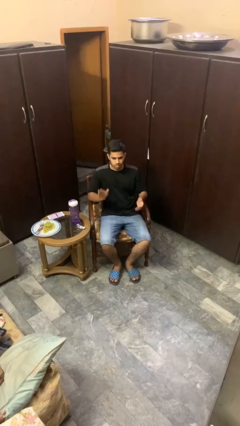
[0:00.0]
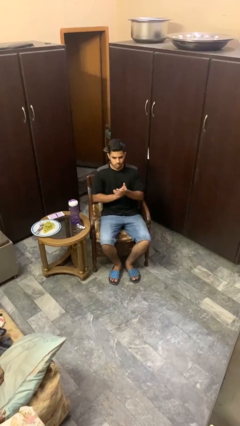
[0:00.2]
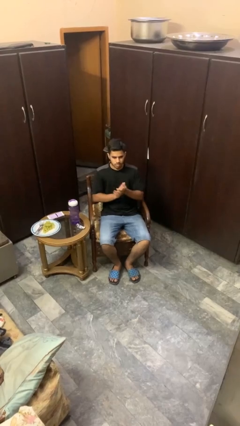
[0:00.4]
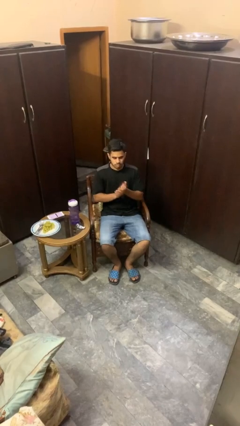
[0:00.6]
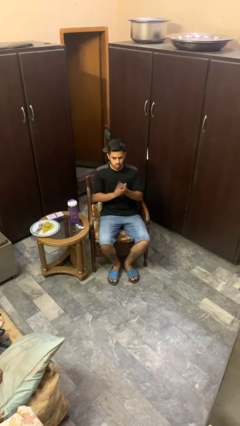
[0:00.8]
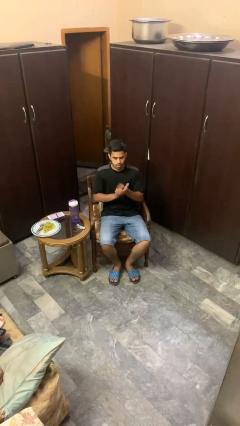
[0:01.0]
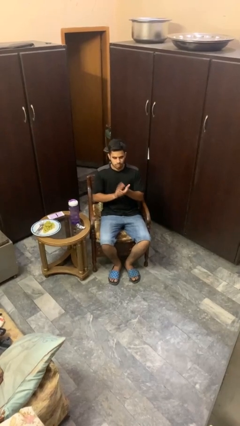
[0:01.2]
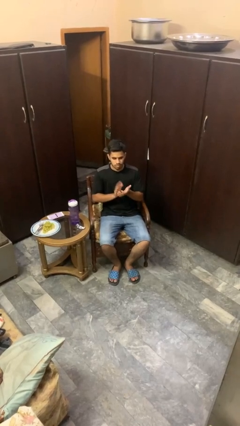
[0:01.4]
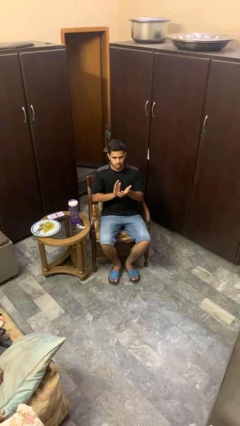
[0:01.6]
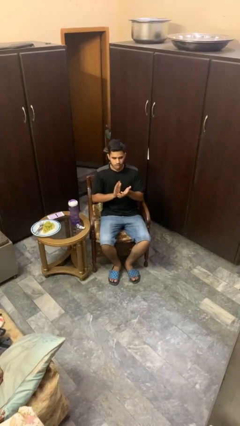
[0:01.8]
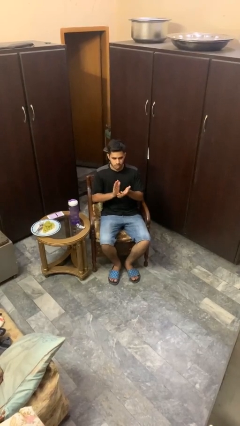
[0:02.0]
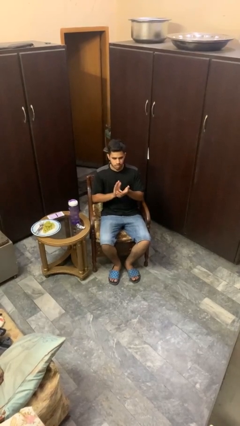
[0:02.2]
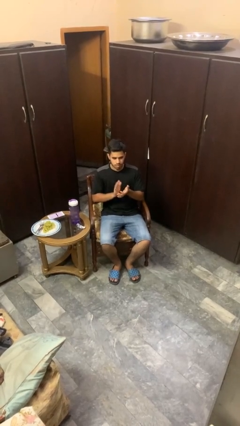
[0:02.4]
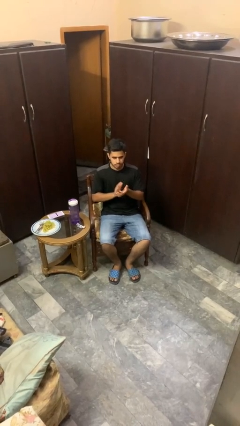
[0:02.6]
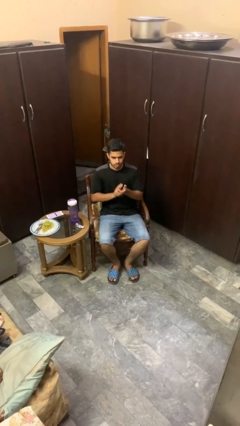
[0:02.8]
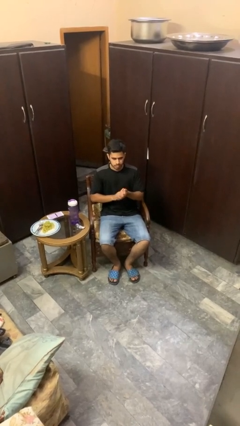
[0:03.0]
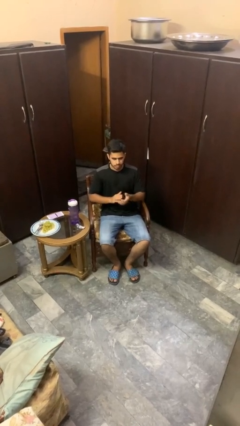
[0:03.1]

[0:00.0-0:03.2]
person claps hands

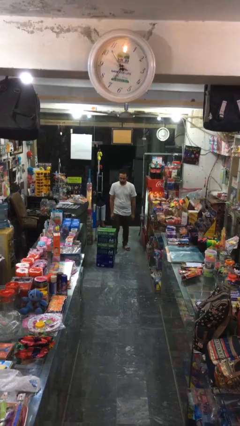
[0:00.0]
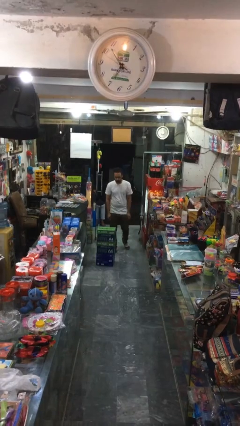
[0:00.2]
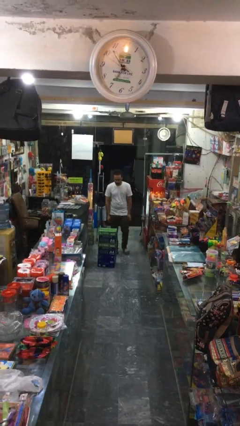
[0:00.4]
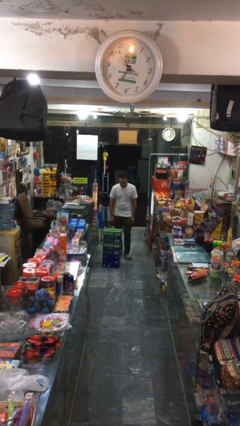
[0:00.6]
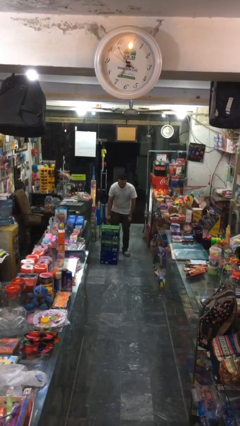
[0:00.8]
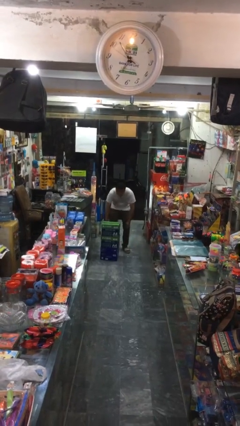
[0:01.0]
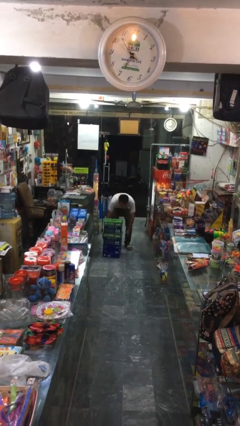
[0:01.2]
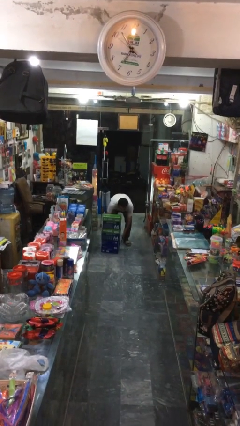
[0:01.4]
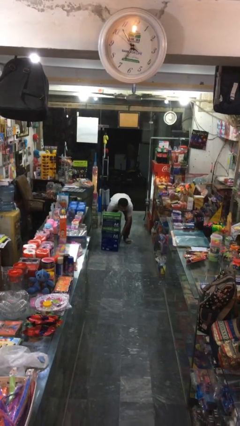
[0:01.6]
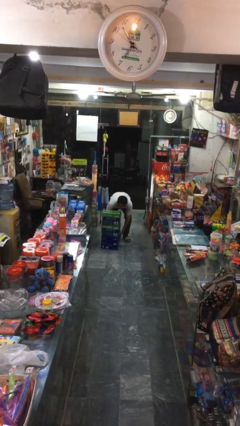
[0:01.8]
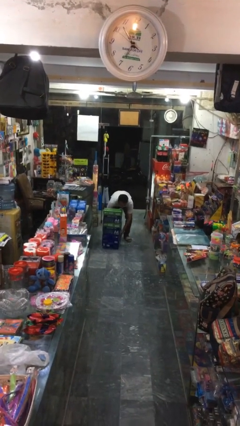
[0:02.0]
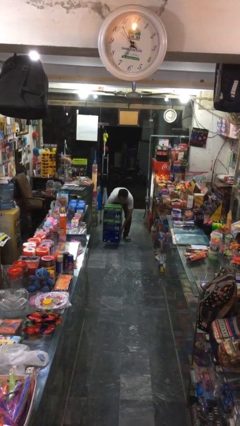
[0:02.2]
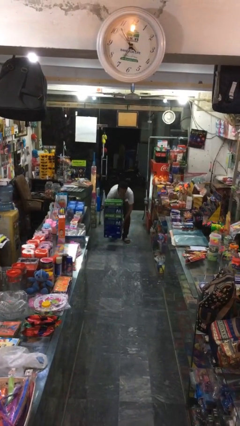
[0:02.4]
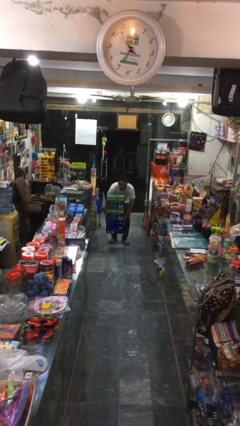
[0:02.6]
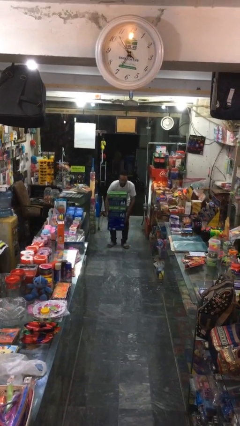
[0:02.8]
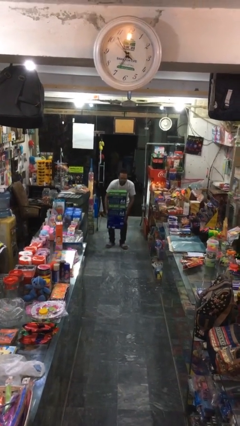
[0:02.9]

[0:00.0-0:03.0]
person picks up object from floor

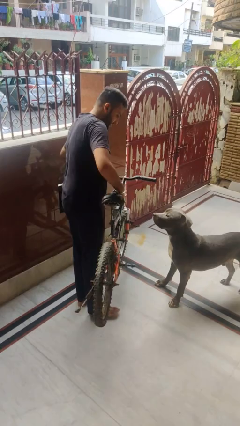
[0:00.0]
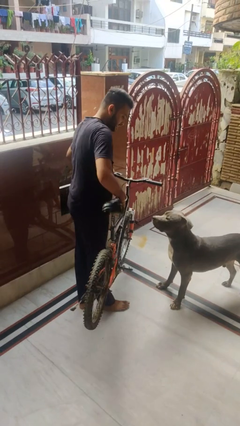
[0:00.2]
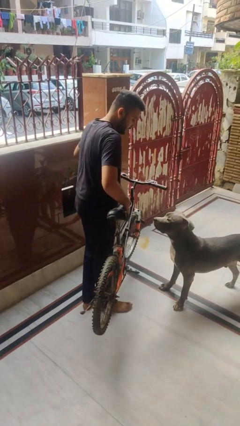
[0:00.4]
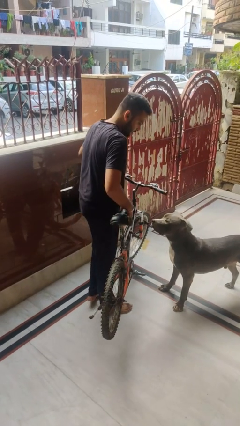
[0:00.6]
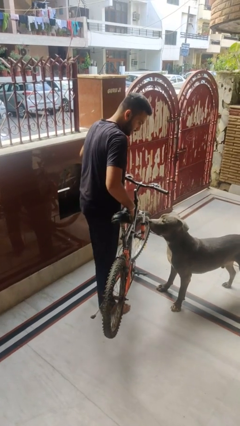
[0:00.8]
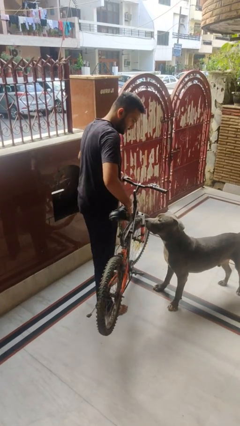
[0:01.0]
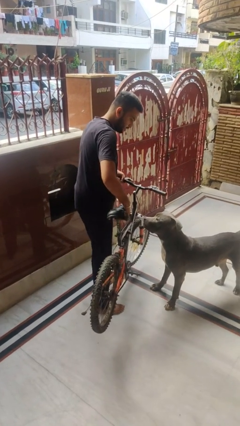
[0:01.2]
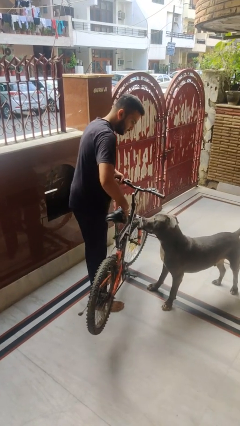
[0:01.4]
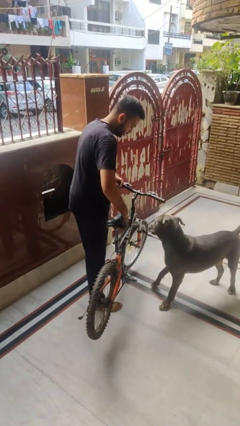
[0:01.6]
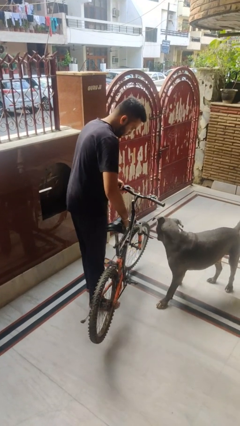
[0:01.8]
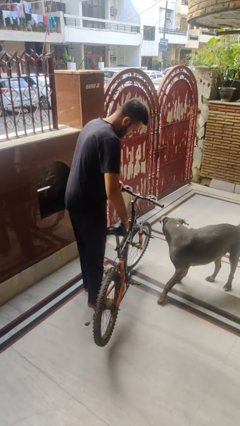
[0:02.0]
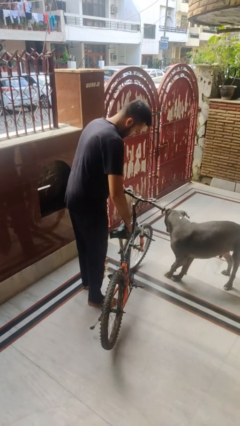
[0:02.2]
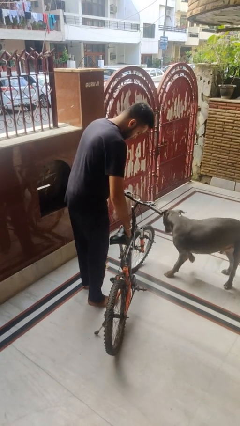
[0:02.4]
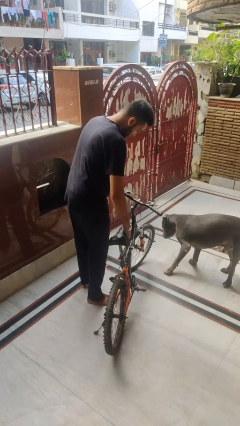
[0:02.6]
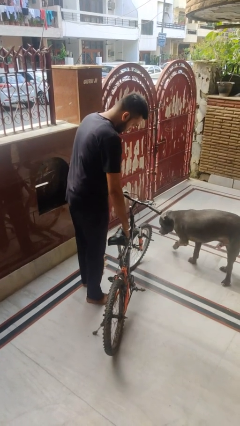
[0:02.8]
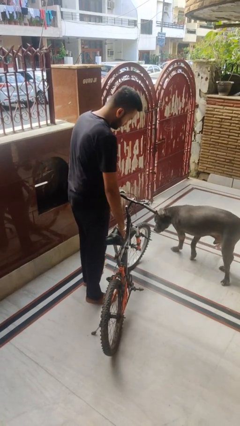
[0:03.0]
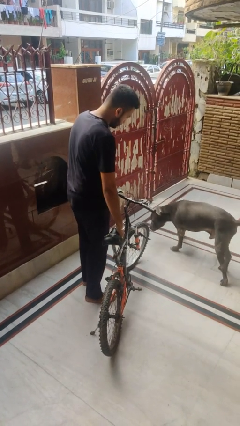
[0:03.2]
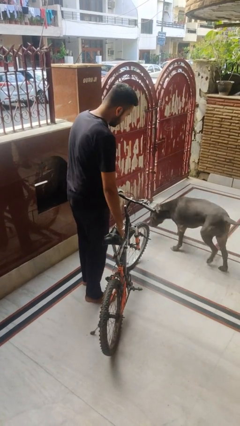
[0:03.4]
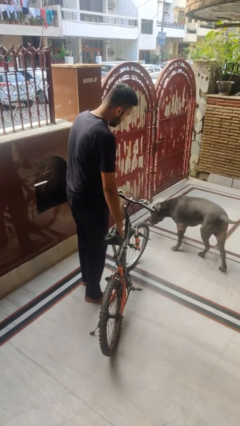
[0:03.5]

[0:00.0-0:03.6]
person carries bicycle

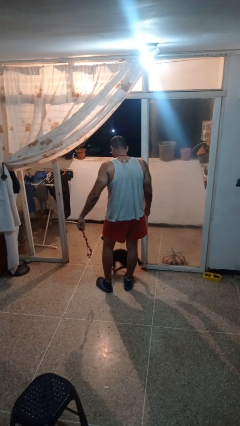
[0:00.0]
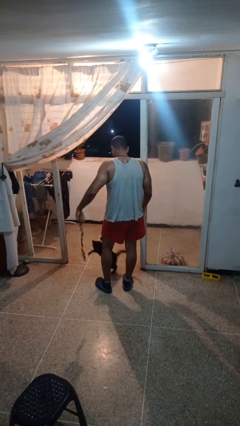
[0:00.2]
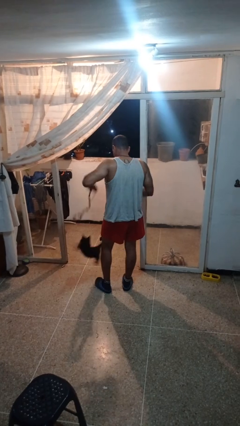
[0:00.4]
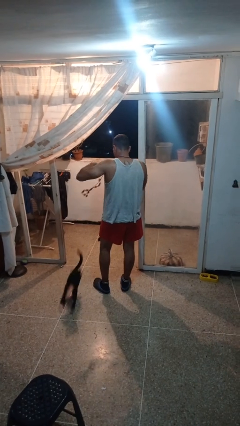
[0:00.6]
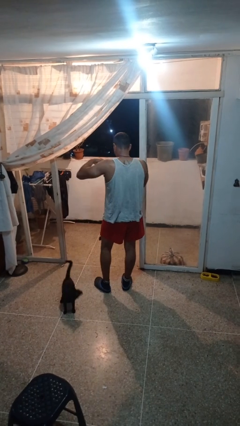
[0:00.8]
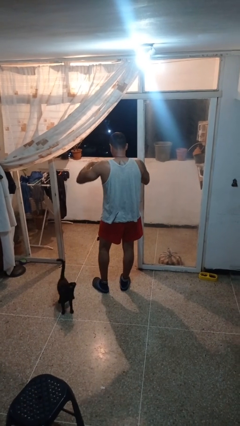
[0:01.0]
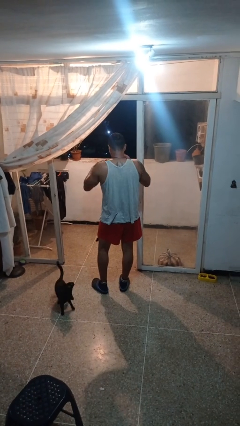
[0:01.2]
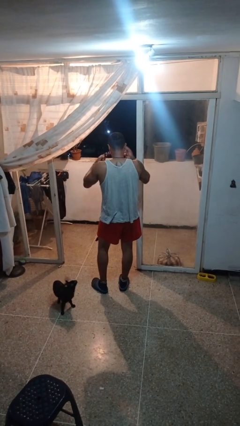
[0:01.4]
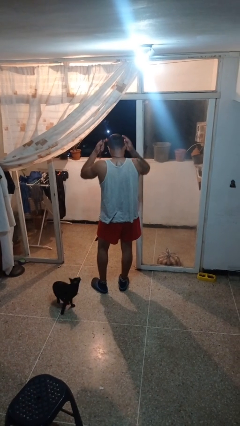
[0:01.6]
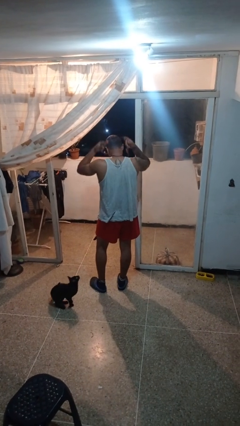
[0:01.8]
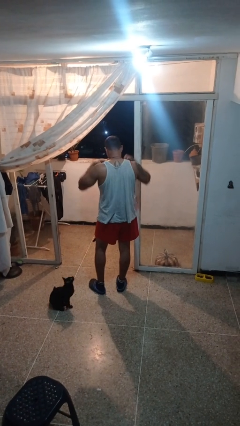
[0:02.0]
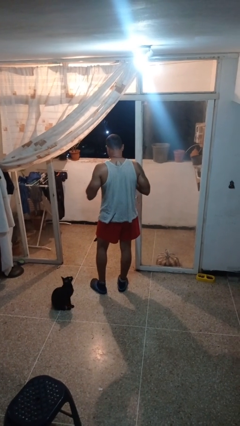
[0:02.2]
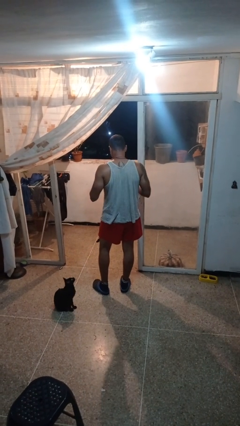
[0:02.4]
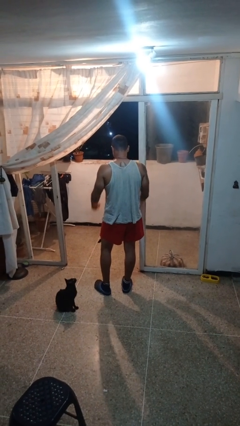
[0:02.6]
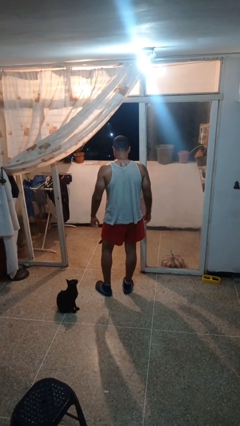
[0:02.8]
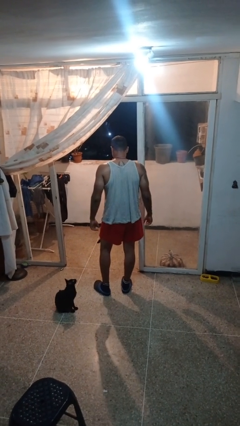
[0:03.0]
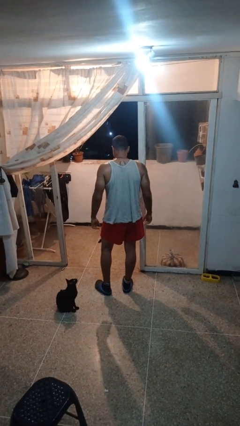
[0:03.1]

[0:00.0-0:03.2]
person puts on necklace

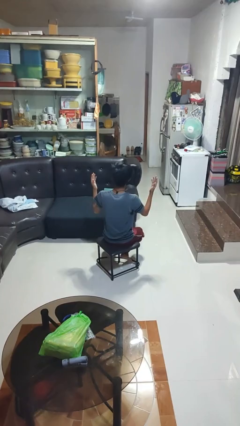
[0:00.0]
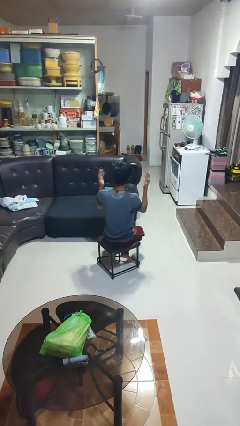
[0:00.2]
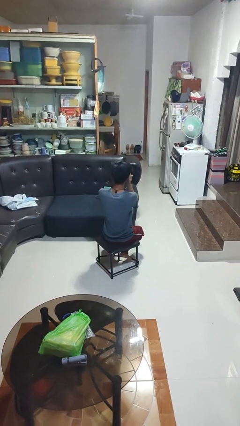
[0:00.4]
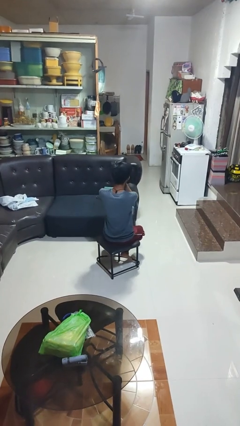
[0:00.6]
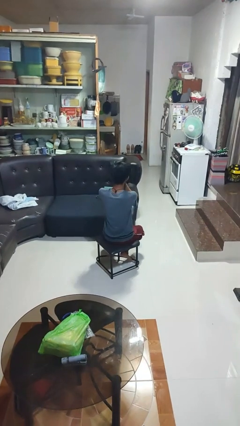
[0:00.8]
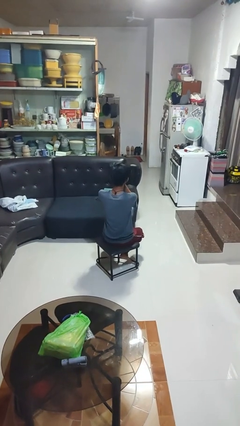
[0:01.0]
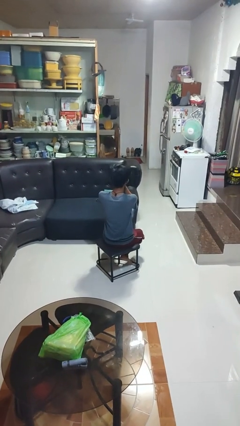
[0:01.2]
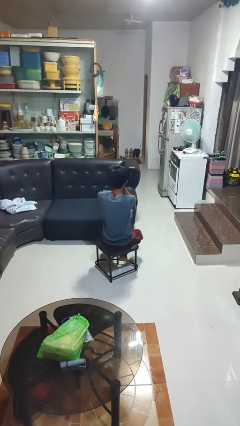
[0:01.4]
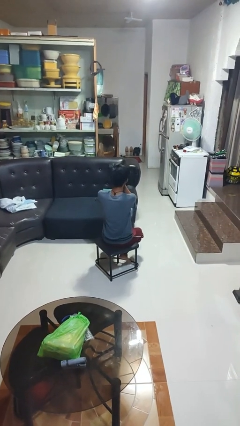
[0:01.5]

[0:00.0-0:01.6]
person covers face with hands

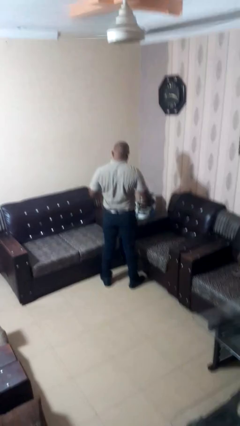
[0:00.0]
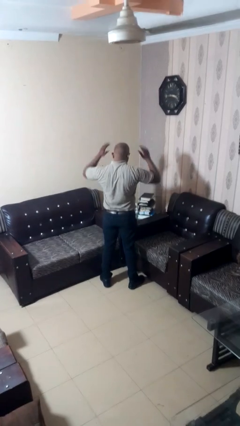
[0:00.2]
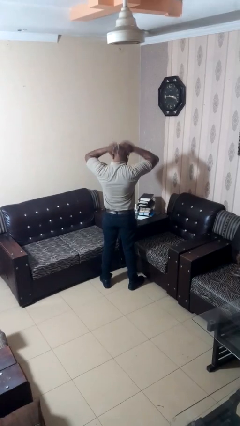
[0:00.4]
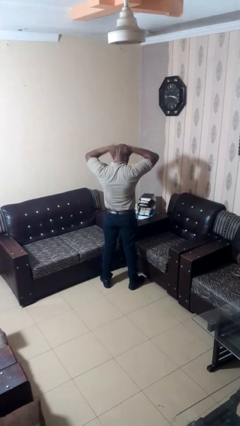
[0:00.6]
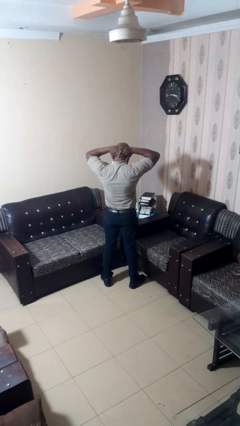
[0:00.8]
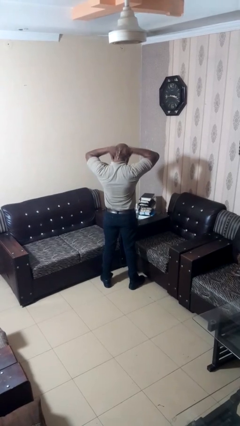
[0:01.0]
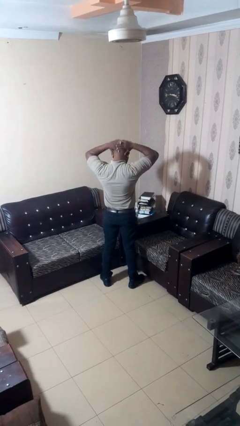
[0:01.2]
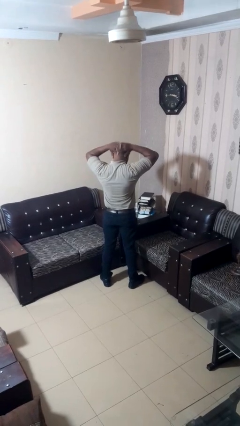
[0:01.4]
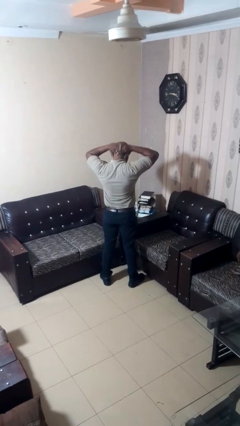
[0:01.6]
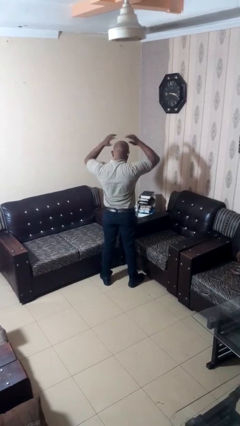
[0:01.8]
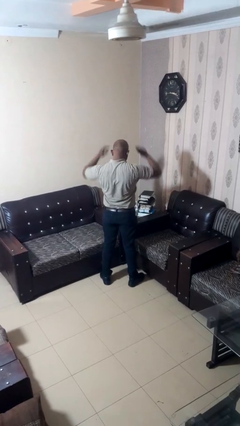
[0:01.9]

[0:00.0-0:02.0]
person rubs neck

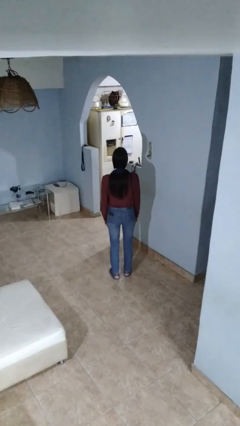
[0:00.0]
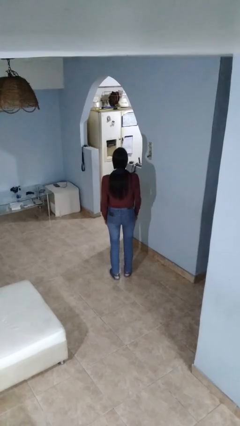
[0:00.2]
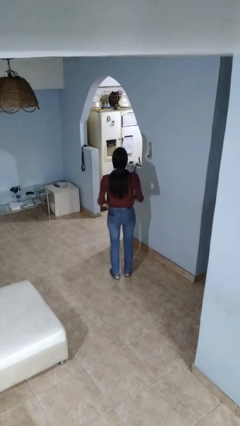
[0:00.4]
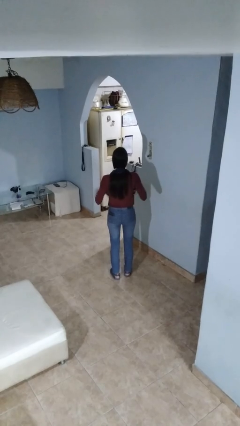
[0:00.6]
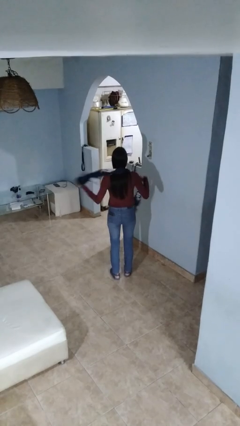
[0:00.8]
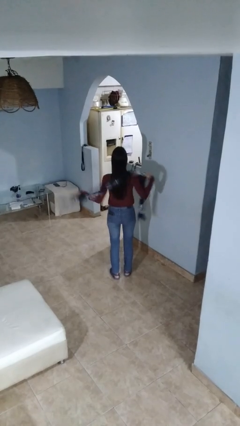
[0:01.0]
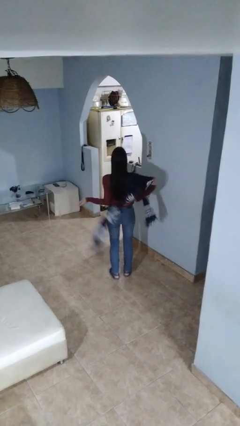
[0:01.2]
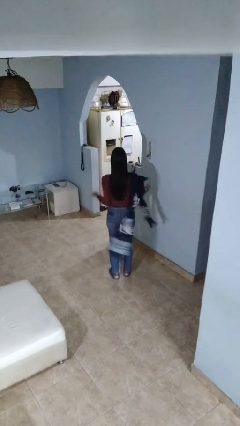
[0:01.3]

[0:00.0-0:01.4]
person takes off scarf
